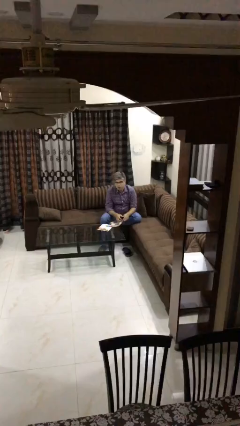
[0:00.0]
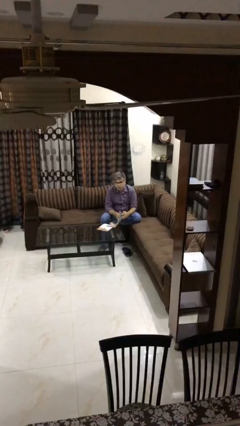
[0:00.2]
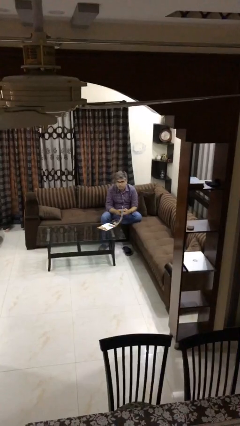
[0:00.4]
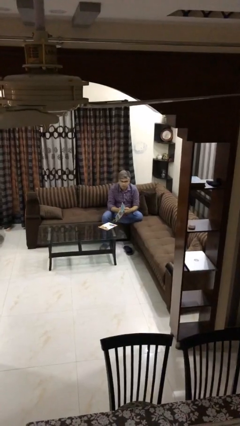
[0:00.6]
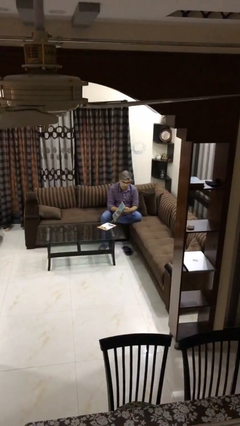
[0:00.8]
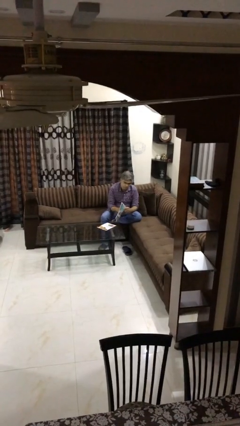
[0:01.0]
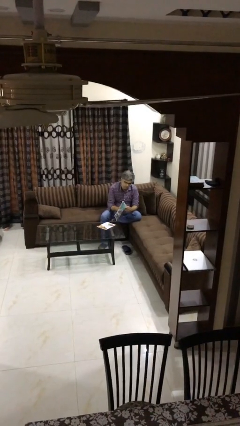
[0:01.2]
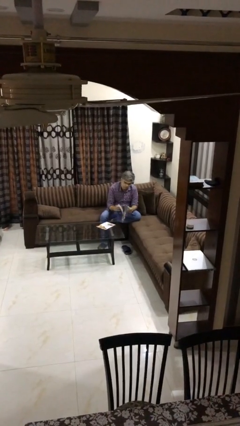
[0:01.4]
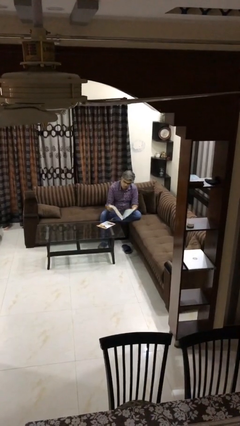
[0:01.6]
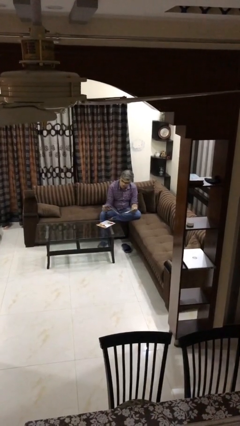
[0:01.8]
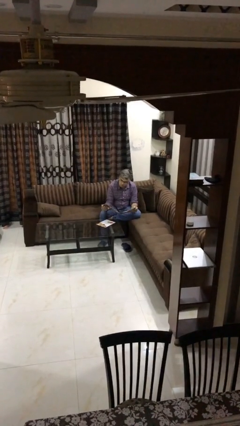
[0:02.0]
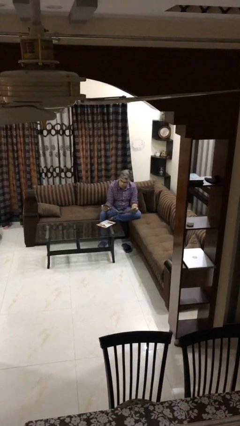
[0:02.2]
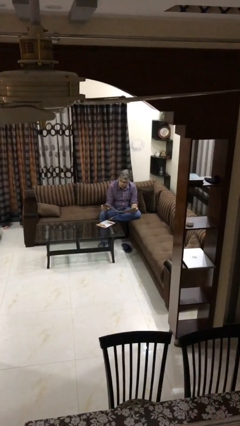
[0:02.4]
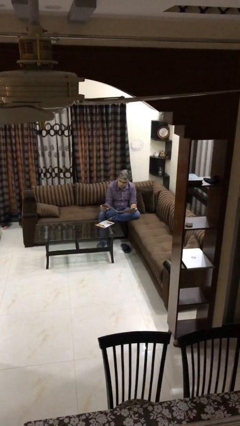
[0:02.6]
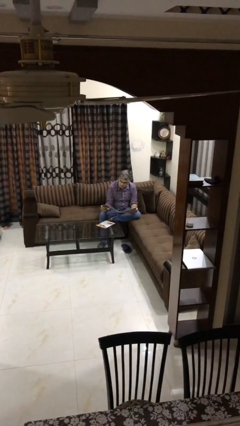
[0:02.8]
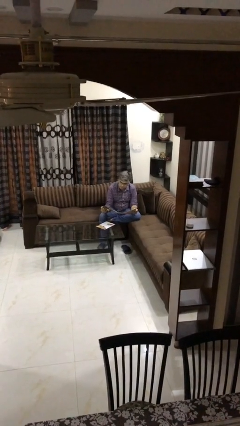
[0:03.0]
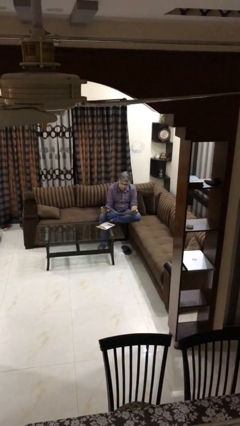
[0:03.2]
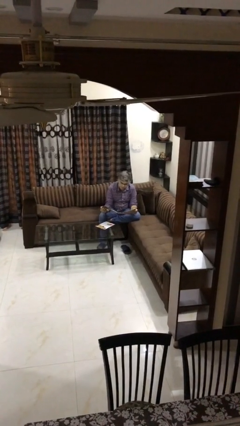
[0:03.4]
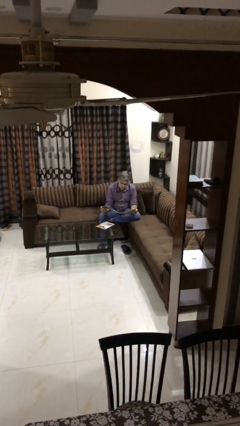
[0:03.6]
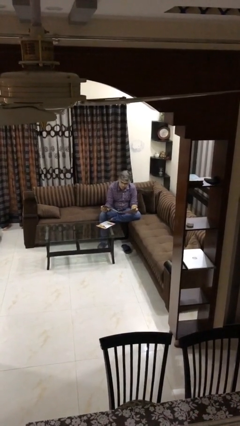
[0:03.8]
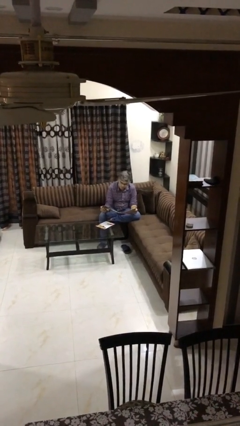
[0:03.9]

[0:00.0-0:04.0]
person reads document

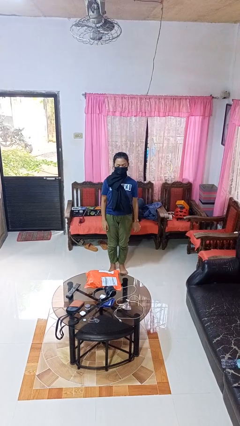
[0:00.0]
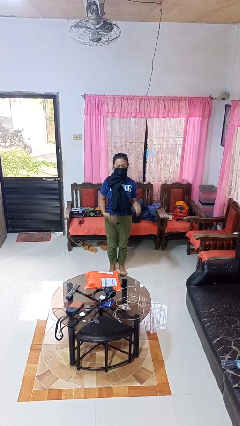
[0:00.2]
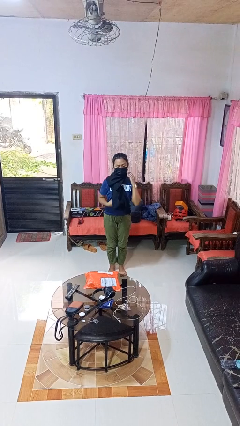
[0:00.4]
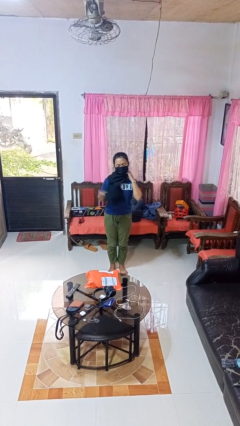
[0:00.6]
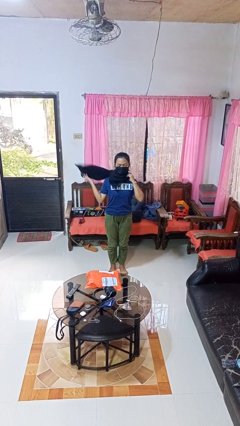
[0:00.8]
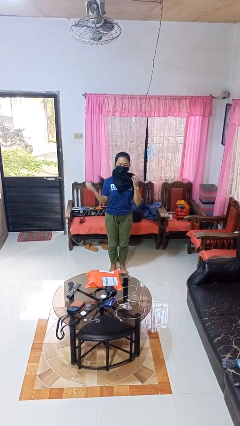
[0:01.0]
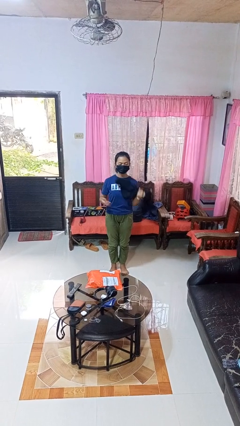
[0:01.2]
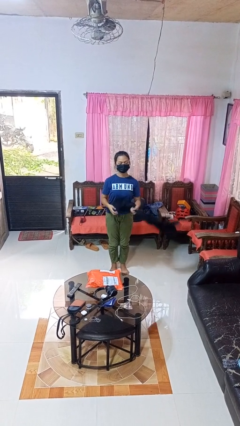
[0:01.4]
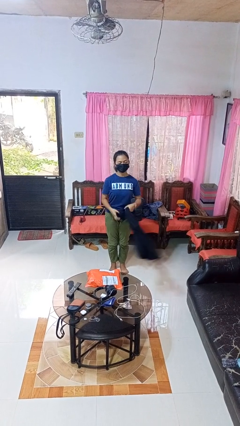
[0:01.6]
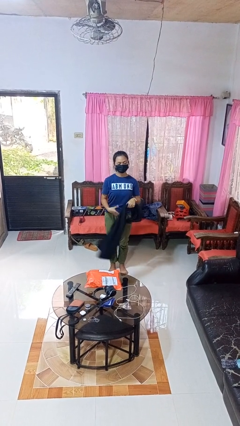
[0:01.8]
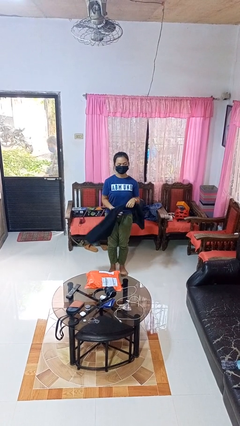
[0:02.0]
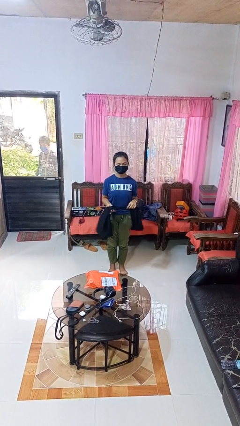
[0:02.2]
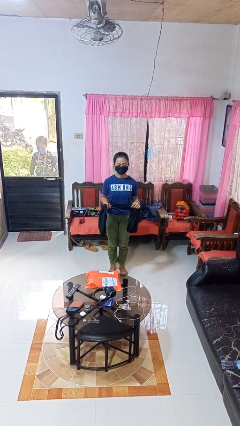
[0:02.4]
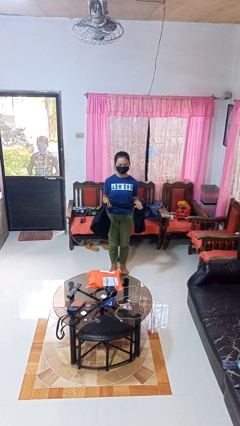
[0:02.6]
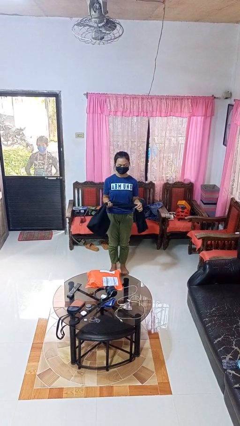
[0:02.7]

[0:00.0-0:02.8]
person takes off scarf

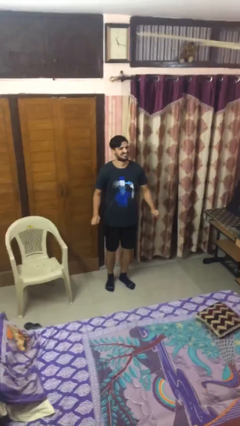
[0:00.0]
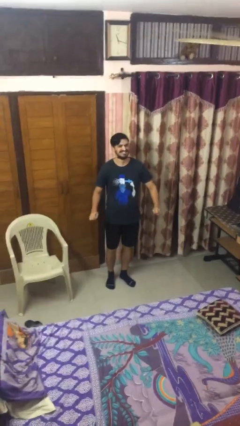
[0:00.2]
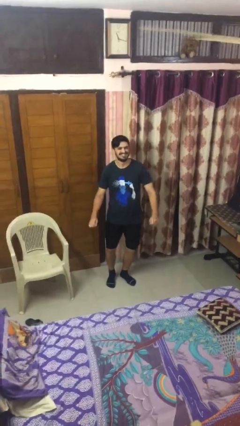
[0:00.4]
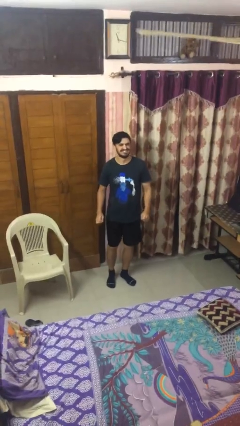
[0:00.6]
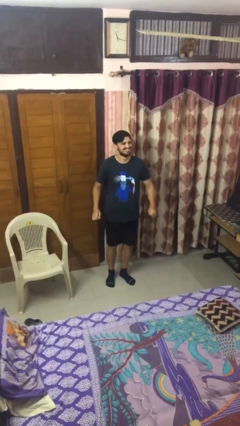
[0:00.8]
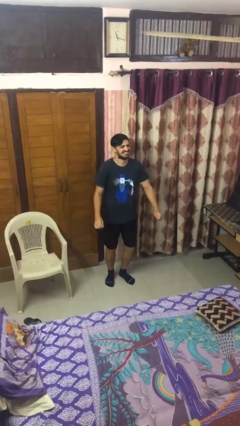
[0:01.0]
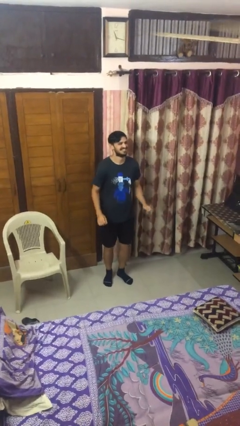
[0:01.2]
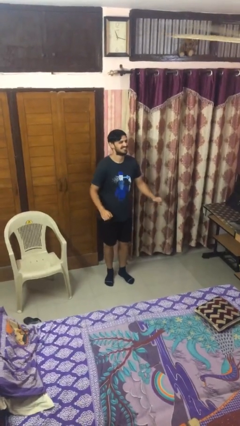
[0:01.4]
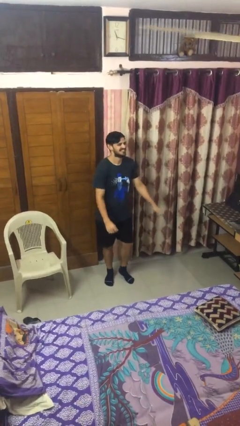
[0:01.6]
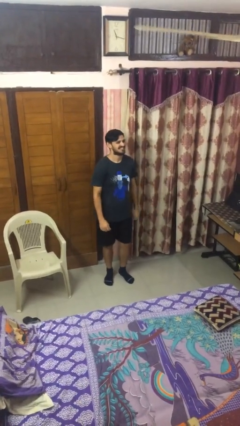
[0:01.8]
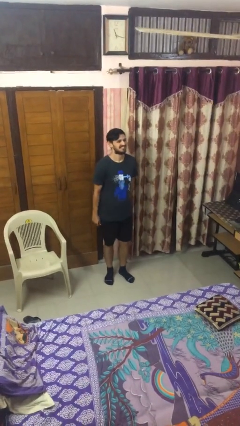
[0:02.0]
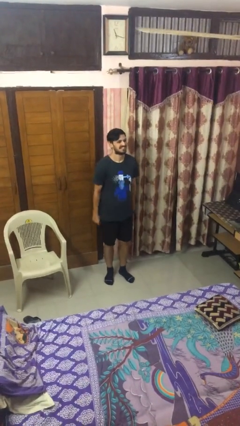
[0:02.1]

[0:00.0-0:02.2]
person dances in place

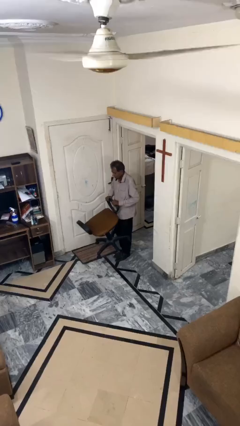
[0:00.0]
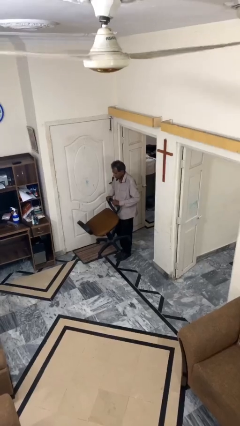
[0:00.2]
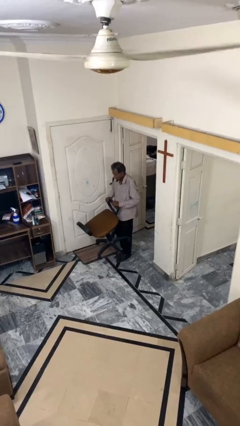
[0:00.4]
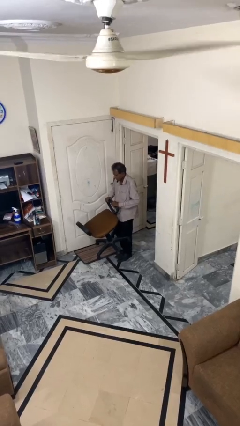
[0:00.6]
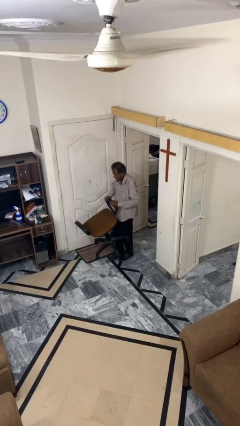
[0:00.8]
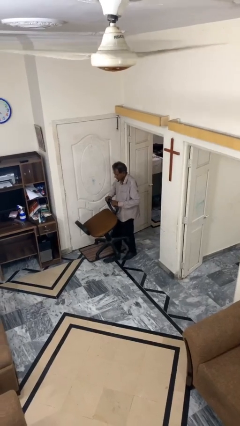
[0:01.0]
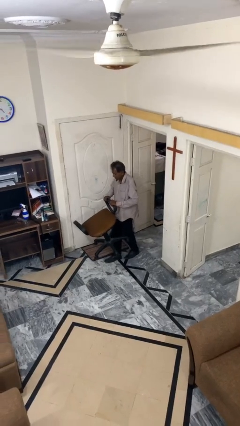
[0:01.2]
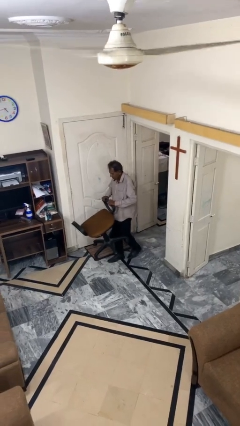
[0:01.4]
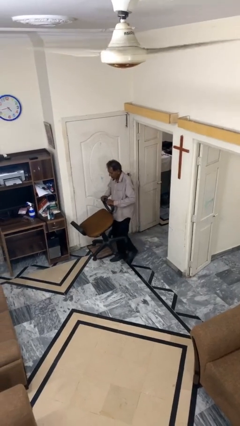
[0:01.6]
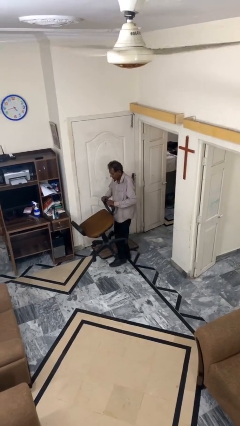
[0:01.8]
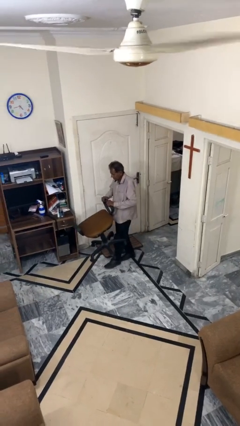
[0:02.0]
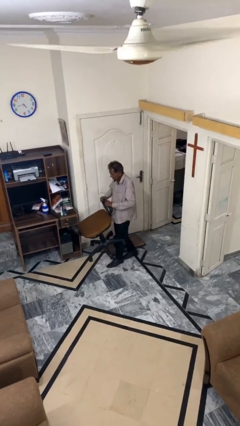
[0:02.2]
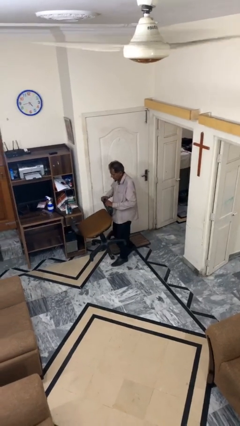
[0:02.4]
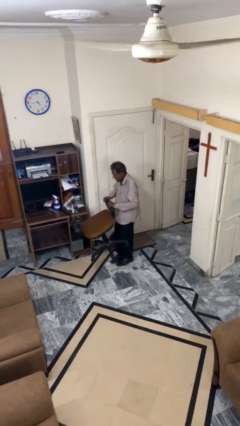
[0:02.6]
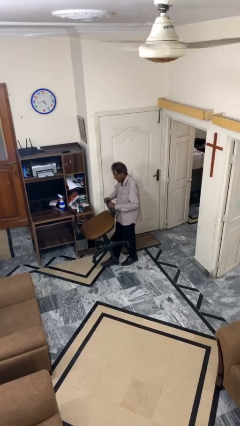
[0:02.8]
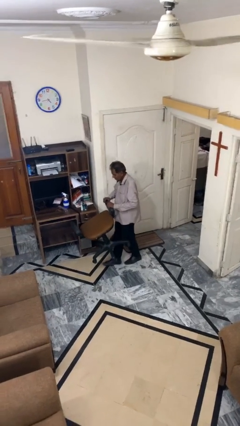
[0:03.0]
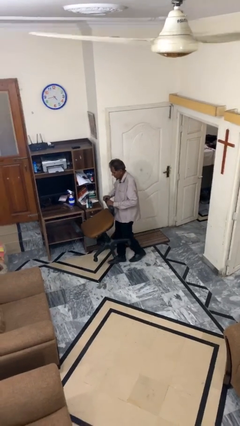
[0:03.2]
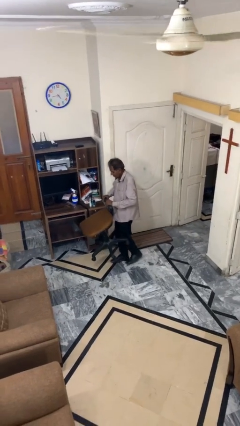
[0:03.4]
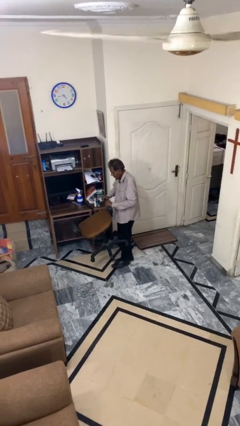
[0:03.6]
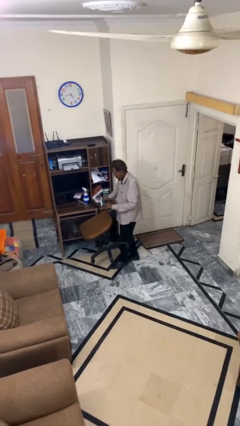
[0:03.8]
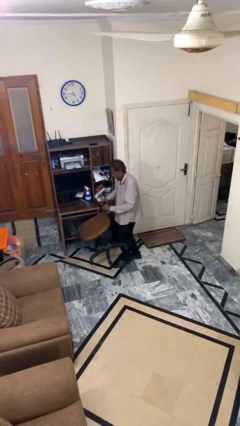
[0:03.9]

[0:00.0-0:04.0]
person carries heavy object

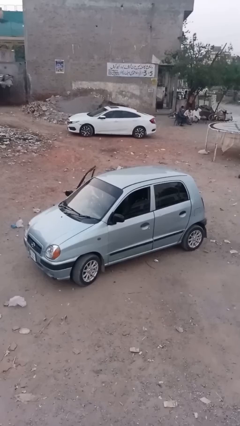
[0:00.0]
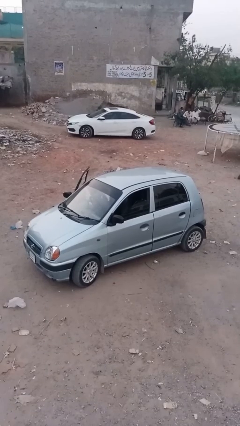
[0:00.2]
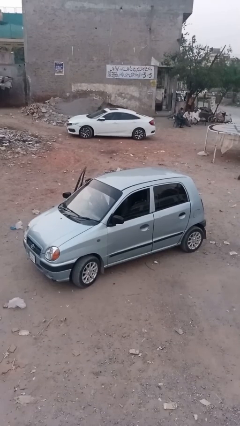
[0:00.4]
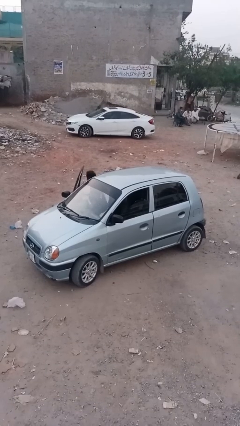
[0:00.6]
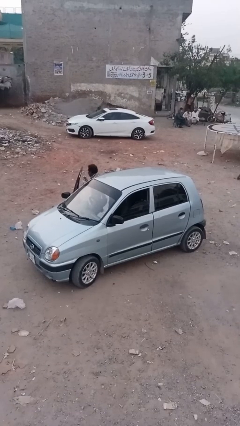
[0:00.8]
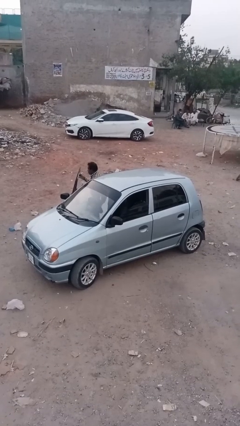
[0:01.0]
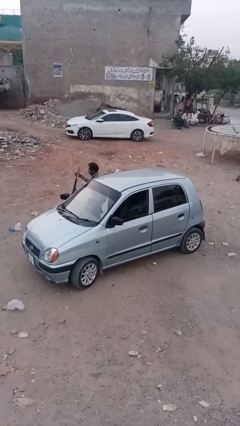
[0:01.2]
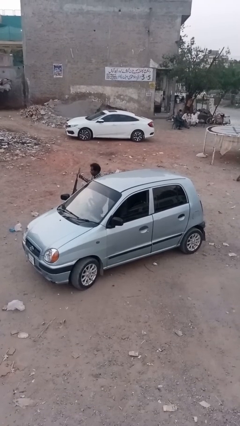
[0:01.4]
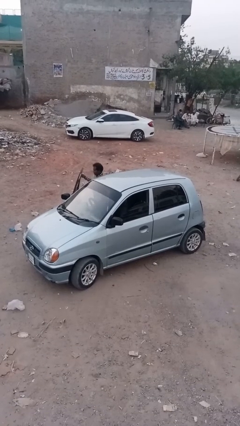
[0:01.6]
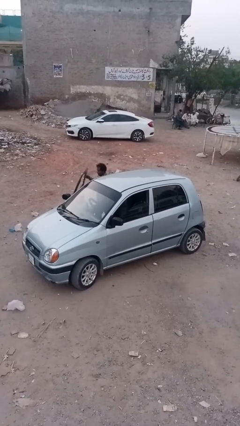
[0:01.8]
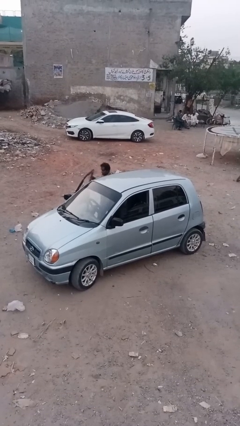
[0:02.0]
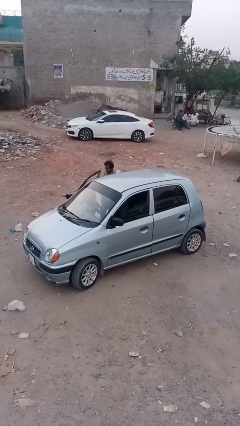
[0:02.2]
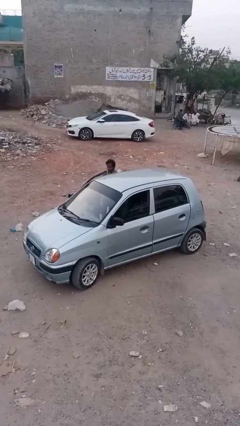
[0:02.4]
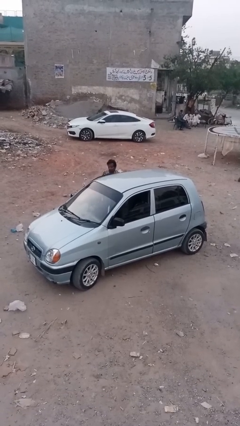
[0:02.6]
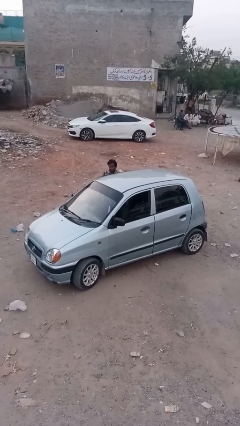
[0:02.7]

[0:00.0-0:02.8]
car drops off person

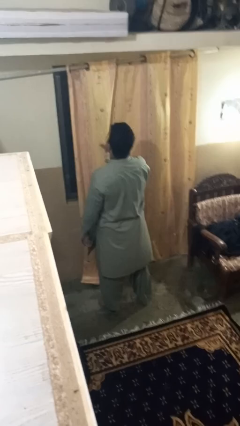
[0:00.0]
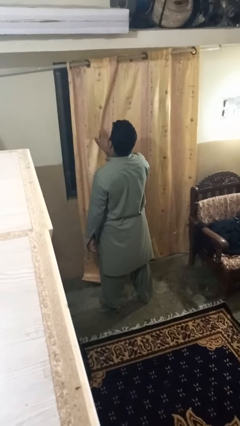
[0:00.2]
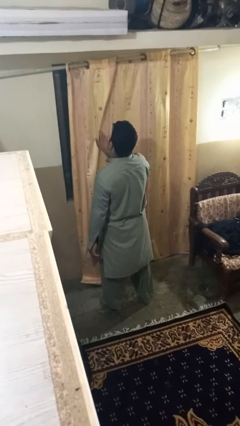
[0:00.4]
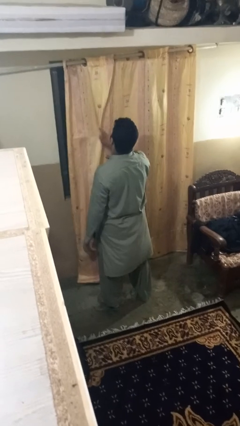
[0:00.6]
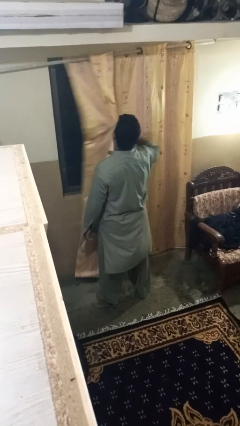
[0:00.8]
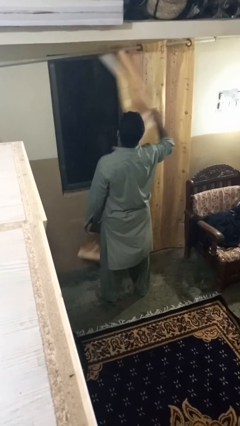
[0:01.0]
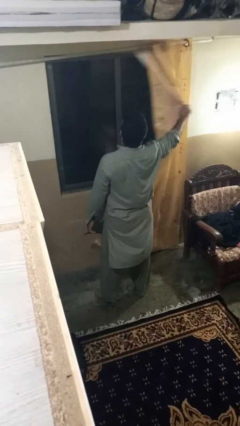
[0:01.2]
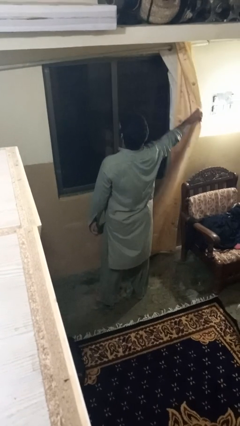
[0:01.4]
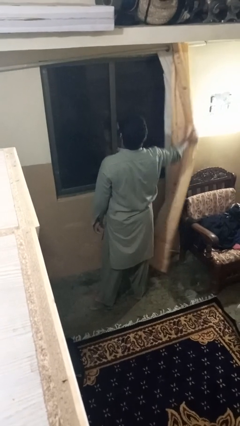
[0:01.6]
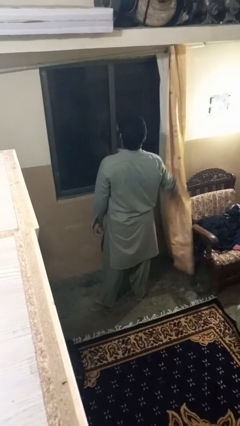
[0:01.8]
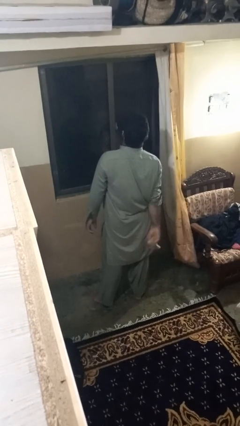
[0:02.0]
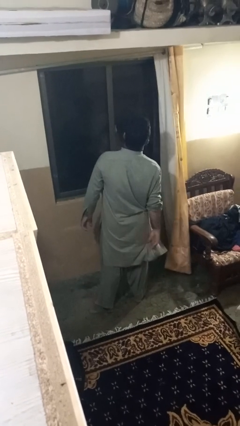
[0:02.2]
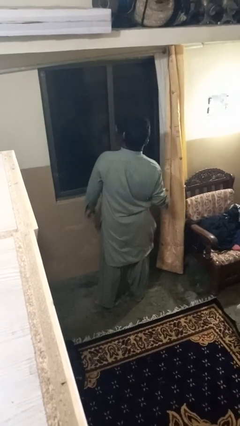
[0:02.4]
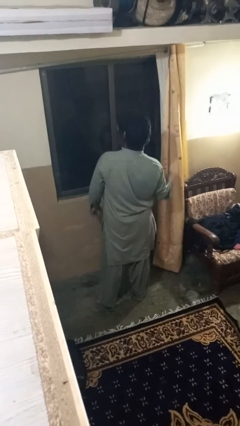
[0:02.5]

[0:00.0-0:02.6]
person opens curtains
